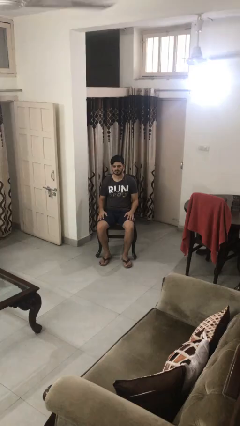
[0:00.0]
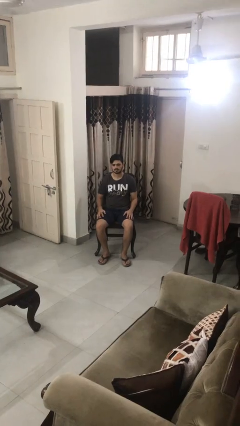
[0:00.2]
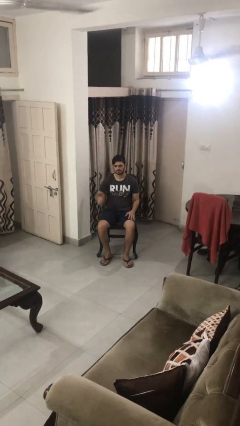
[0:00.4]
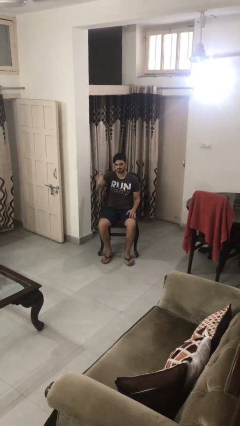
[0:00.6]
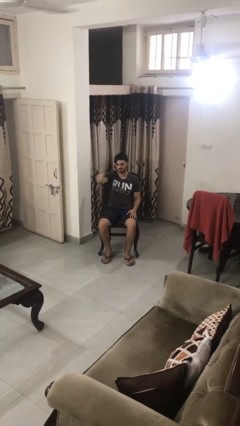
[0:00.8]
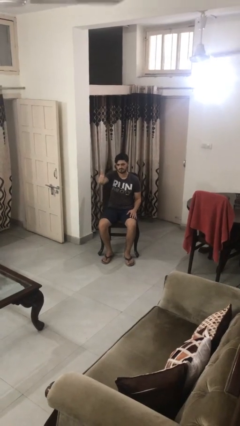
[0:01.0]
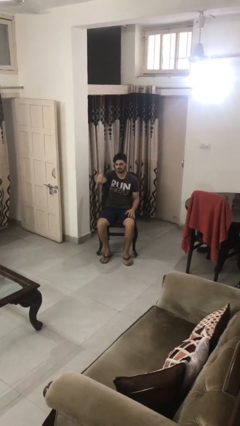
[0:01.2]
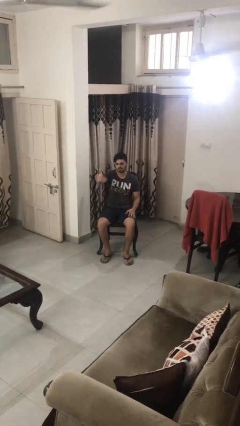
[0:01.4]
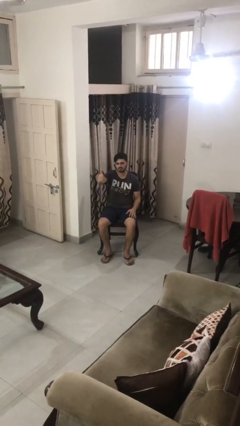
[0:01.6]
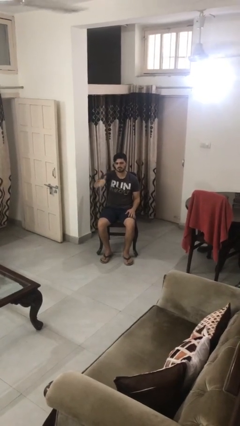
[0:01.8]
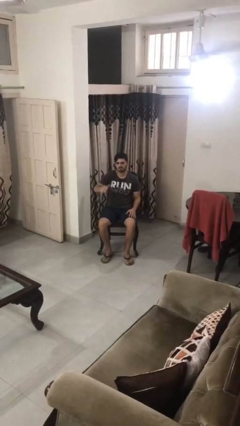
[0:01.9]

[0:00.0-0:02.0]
person gestures thumbs up

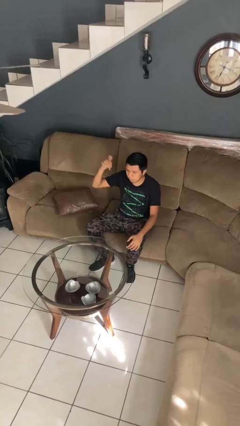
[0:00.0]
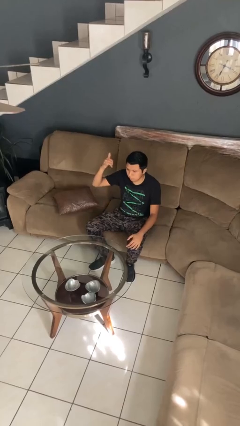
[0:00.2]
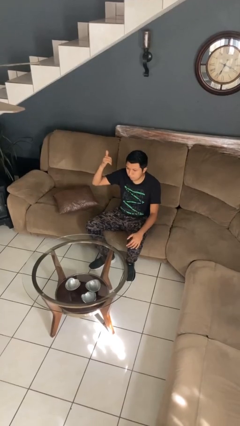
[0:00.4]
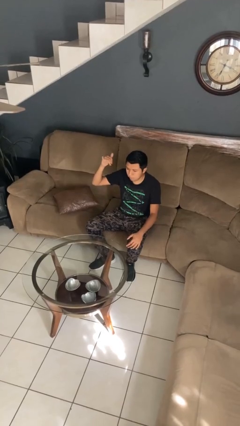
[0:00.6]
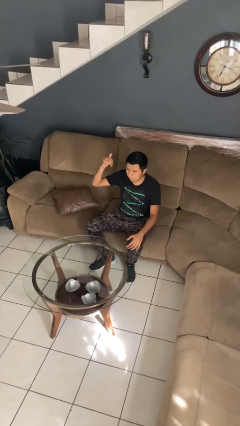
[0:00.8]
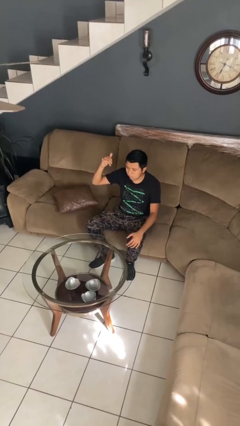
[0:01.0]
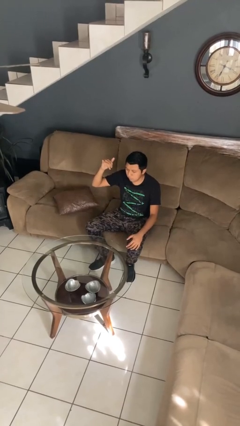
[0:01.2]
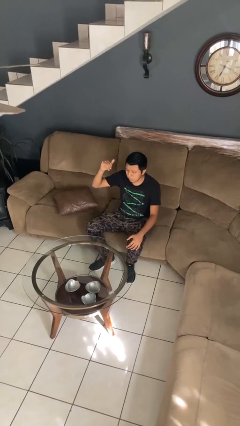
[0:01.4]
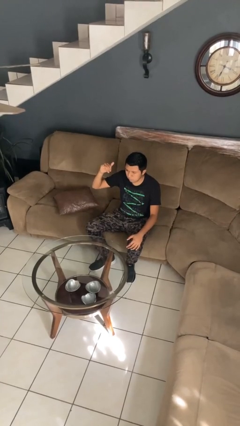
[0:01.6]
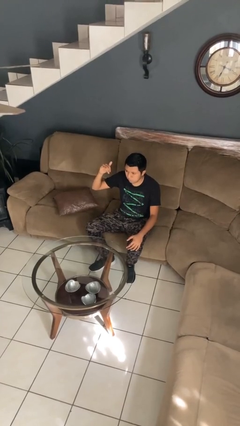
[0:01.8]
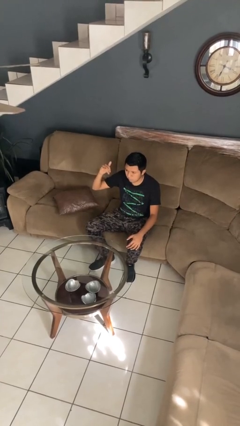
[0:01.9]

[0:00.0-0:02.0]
person gestures hang loose

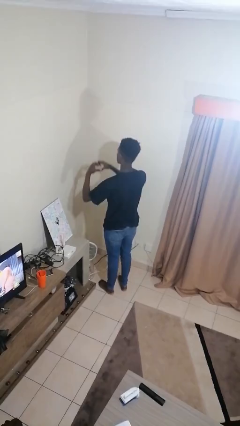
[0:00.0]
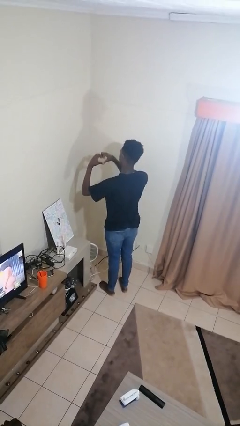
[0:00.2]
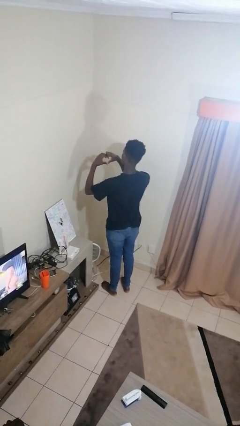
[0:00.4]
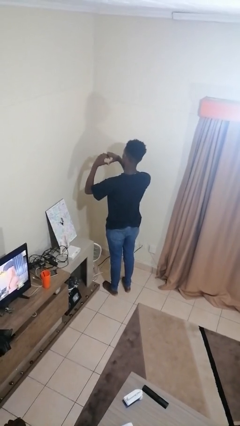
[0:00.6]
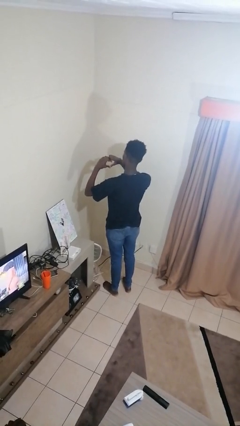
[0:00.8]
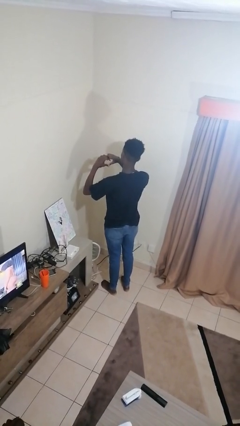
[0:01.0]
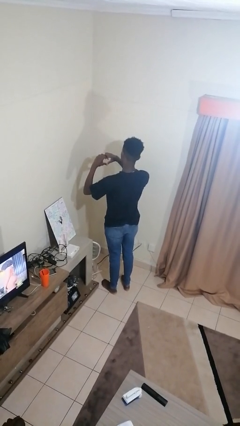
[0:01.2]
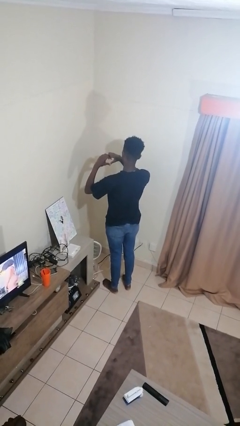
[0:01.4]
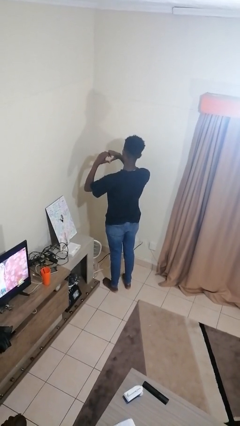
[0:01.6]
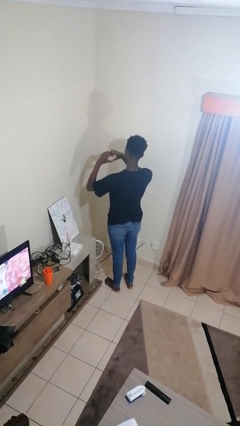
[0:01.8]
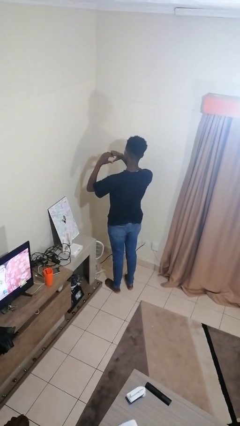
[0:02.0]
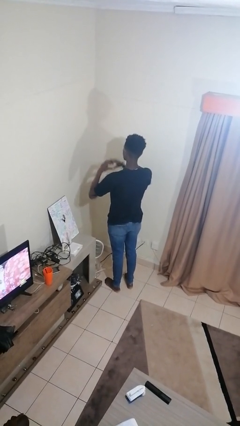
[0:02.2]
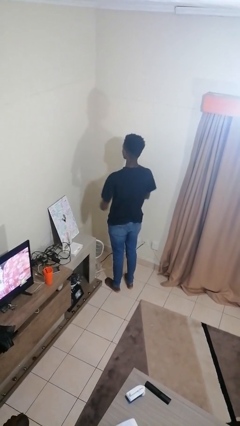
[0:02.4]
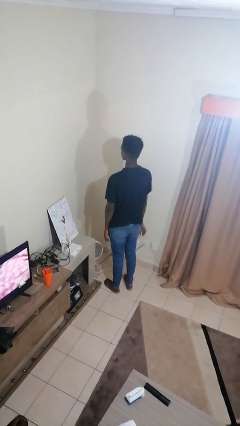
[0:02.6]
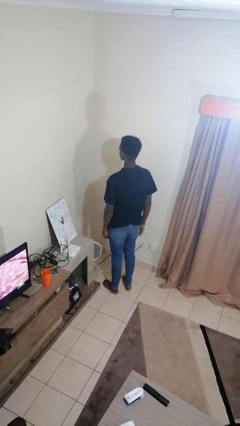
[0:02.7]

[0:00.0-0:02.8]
person gestures heart

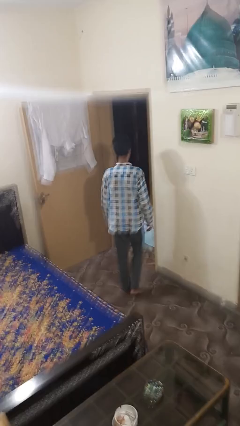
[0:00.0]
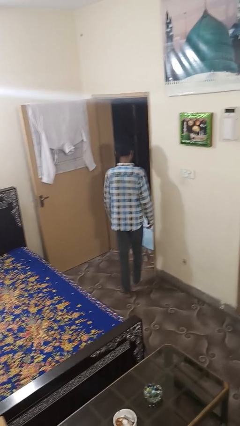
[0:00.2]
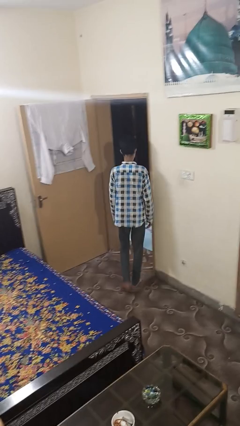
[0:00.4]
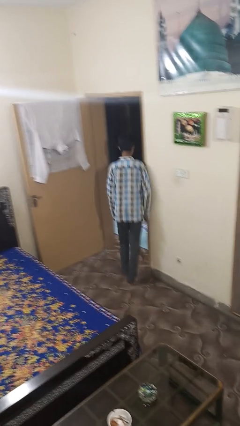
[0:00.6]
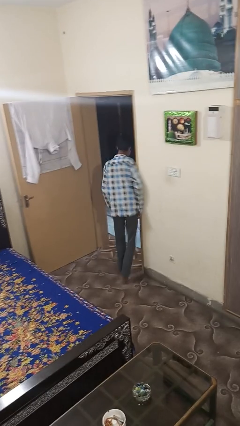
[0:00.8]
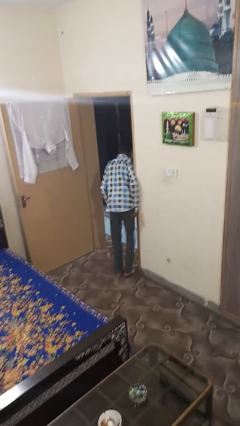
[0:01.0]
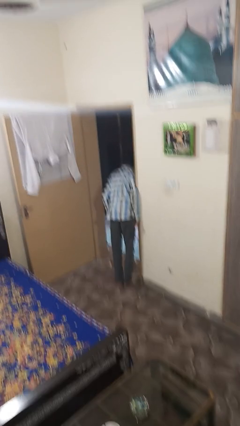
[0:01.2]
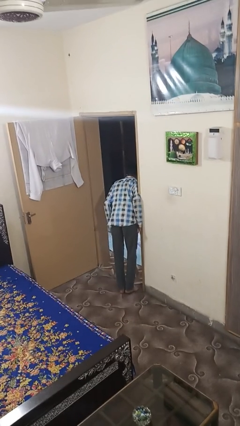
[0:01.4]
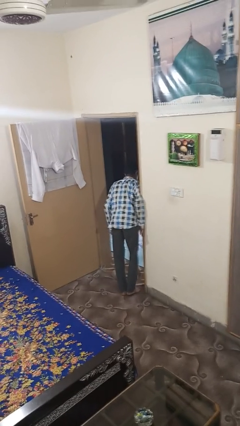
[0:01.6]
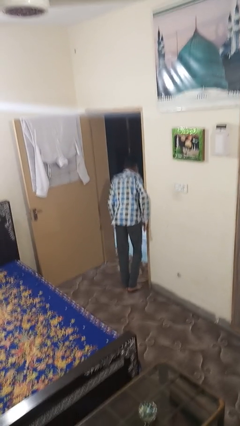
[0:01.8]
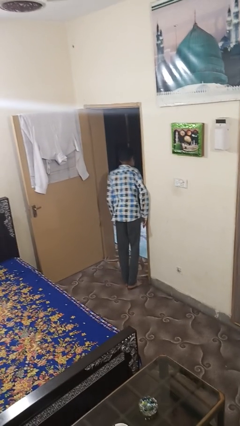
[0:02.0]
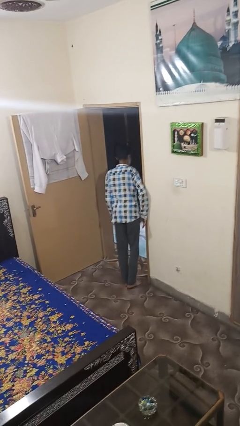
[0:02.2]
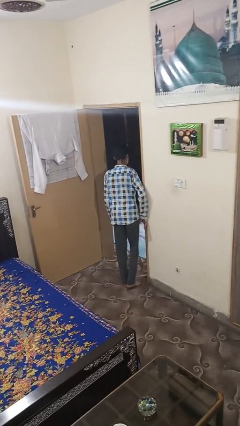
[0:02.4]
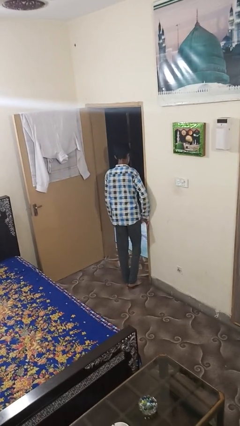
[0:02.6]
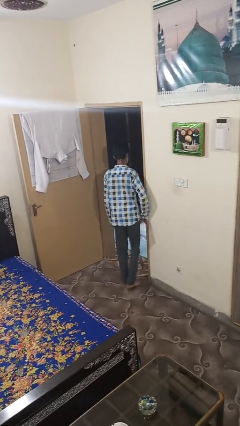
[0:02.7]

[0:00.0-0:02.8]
person bumps into wall

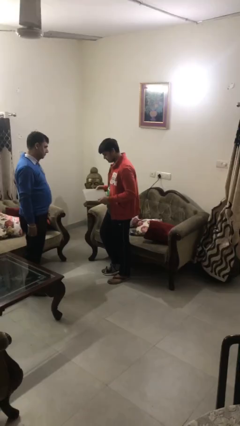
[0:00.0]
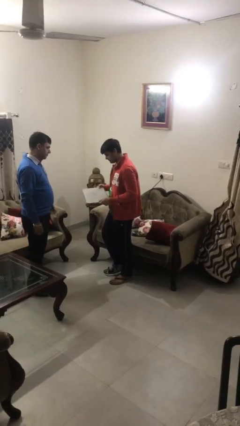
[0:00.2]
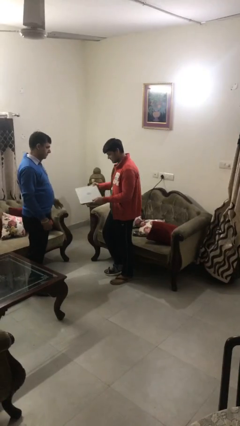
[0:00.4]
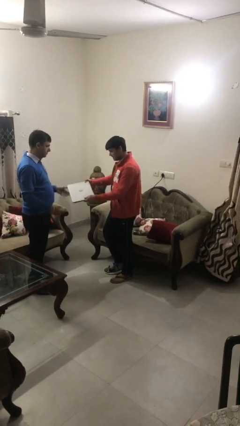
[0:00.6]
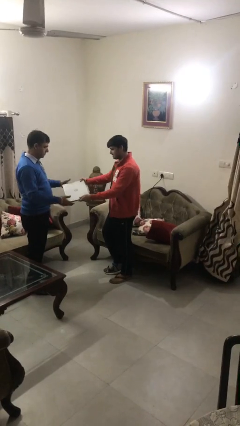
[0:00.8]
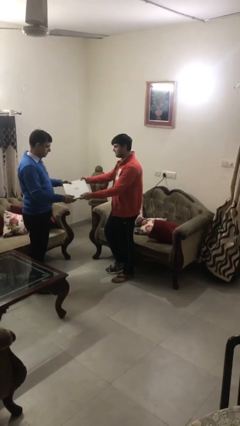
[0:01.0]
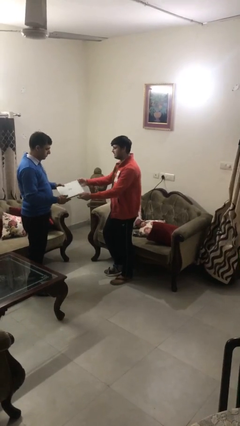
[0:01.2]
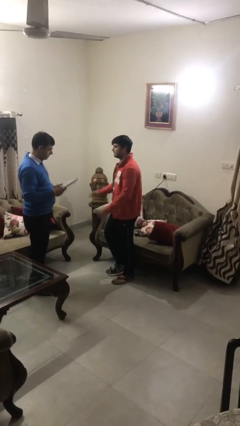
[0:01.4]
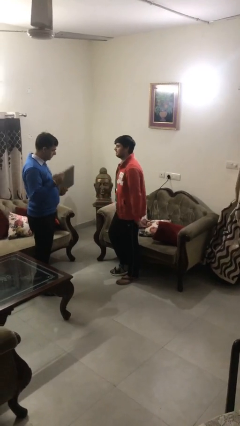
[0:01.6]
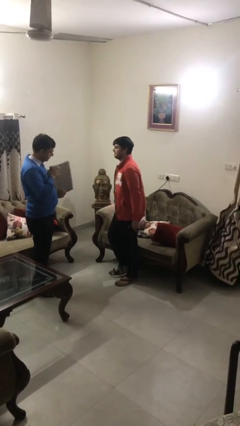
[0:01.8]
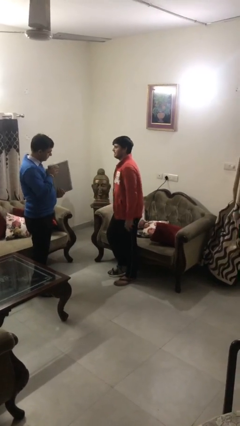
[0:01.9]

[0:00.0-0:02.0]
person transfers object to person

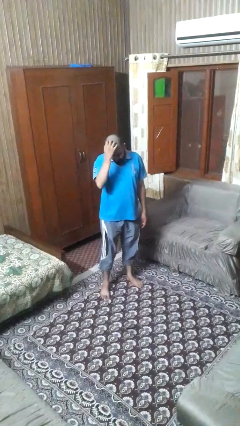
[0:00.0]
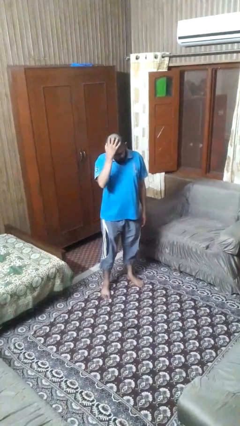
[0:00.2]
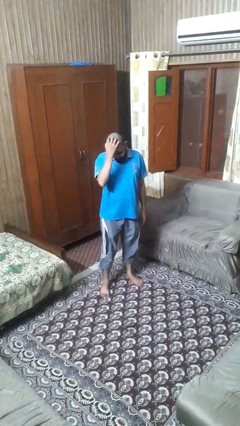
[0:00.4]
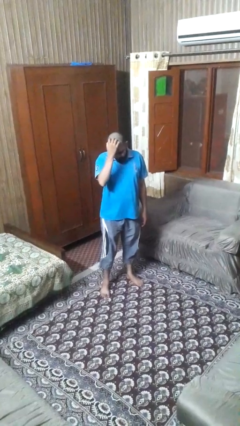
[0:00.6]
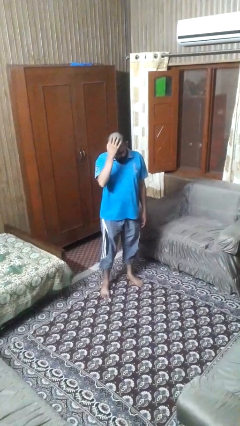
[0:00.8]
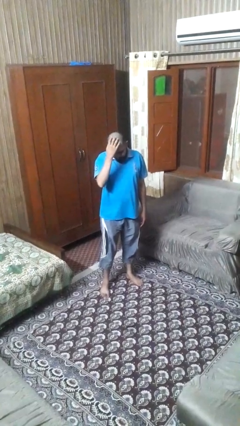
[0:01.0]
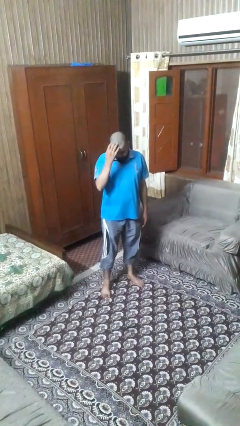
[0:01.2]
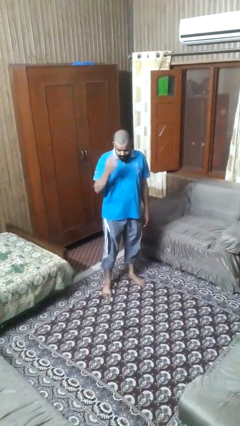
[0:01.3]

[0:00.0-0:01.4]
person scratches face

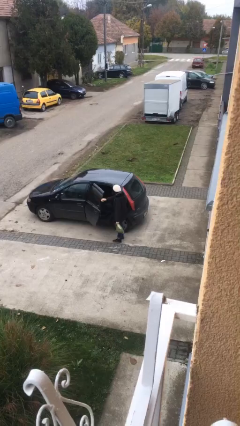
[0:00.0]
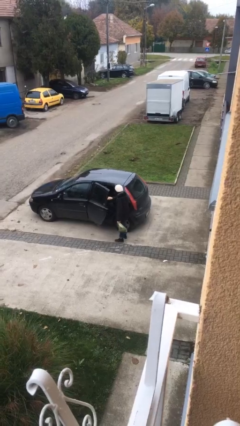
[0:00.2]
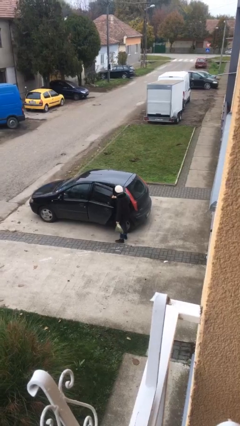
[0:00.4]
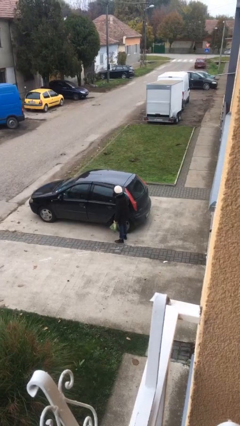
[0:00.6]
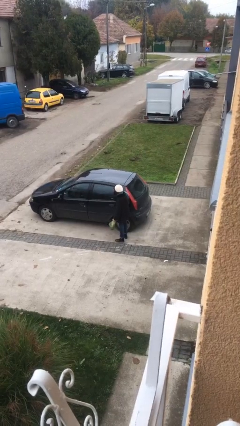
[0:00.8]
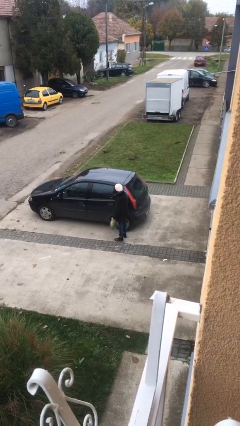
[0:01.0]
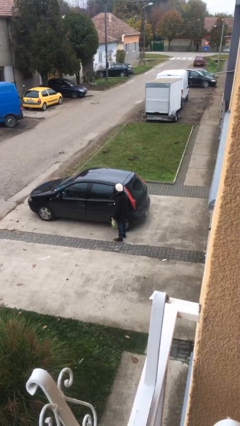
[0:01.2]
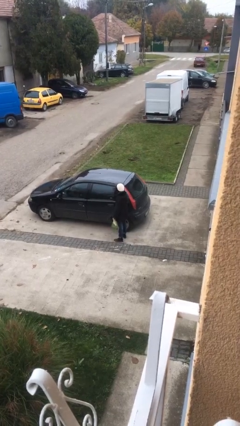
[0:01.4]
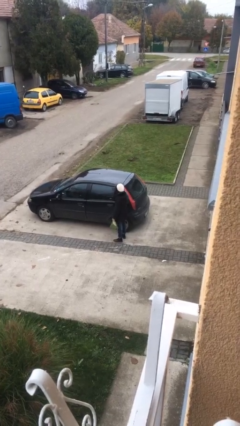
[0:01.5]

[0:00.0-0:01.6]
person closes car door

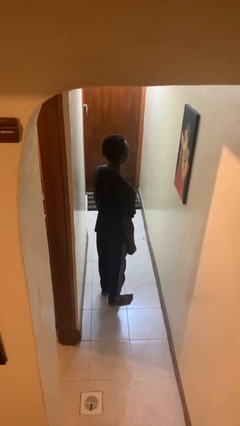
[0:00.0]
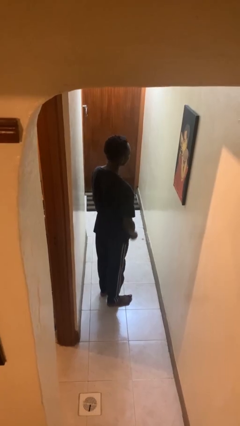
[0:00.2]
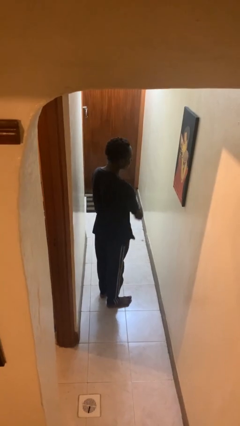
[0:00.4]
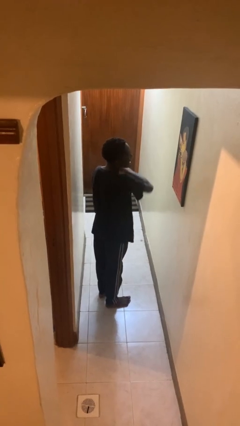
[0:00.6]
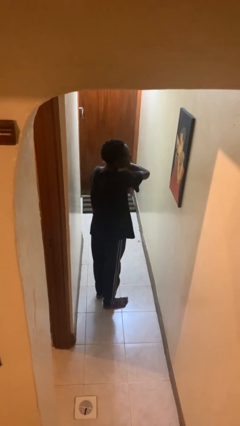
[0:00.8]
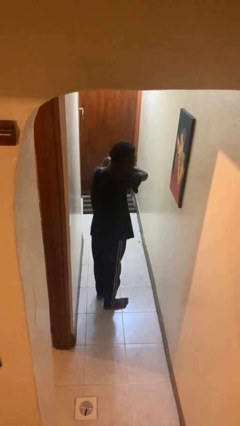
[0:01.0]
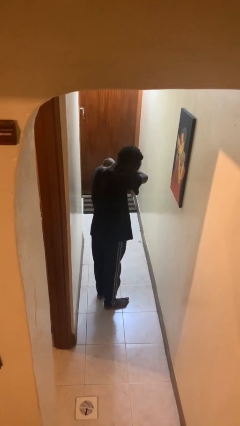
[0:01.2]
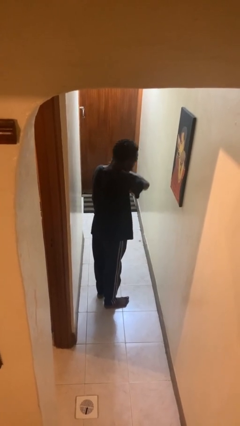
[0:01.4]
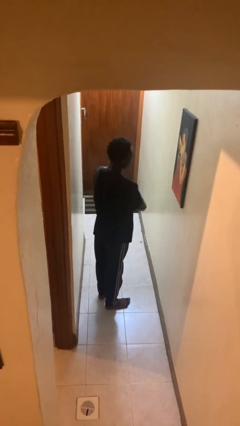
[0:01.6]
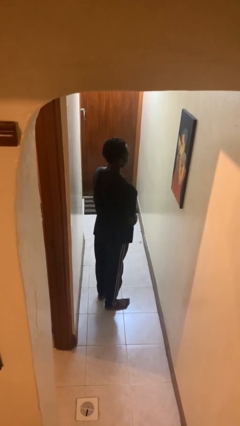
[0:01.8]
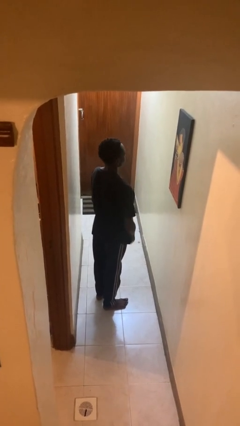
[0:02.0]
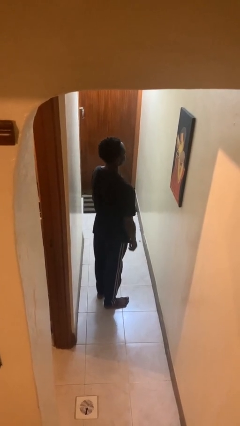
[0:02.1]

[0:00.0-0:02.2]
person sneezes into arm
